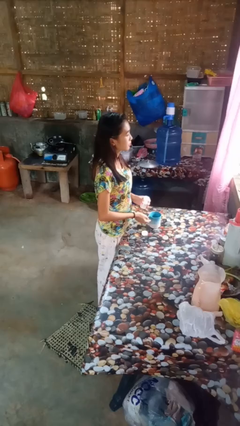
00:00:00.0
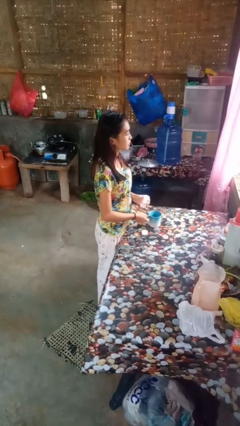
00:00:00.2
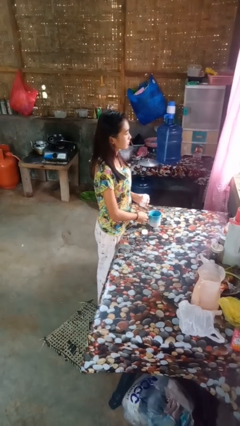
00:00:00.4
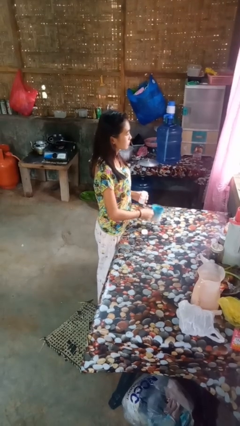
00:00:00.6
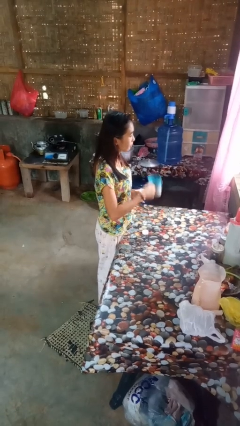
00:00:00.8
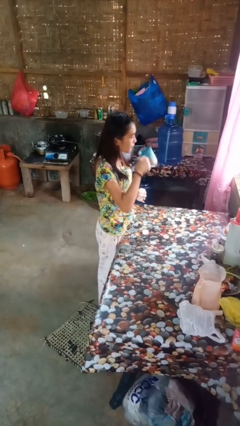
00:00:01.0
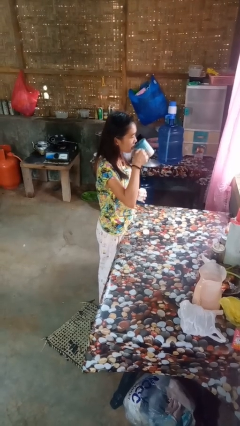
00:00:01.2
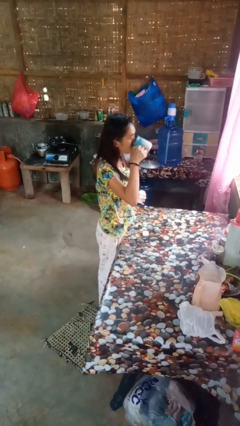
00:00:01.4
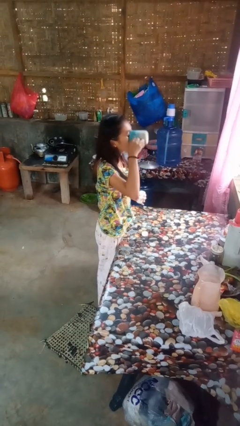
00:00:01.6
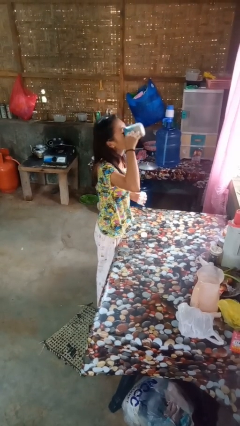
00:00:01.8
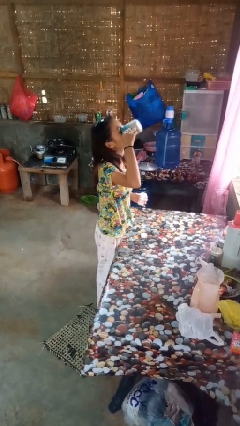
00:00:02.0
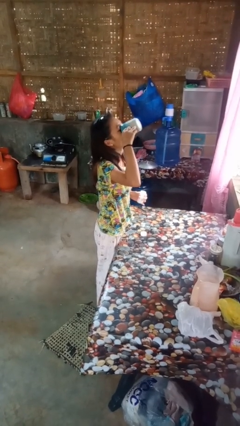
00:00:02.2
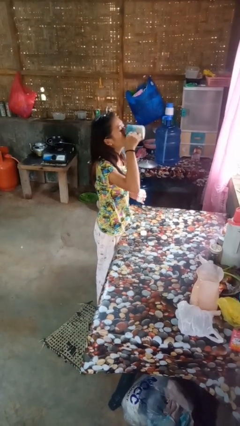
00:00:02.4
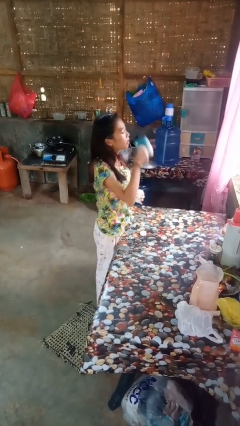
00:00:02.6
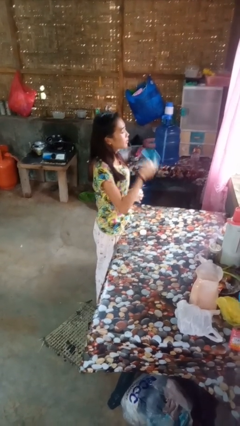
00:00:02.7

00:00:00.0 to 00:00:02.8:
person drinks from cup

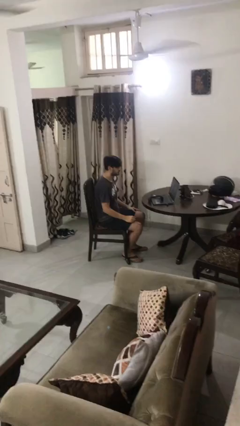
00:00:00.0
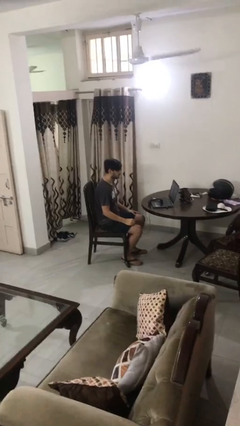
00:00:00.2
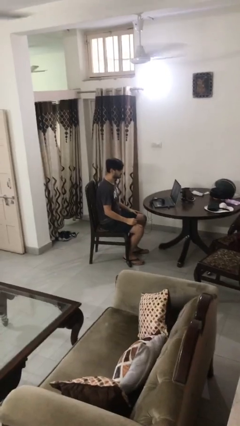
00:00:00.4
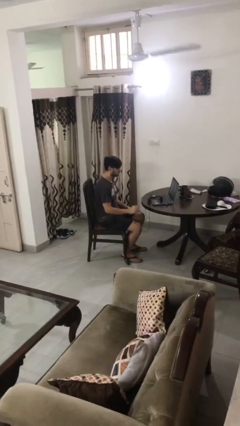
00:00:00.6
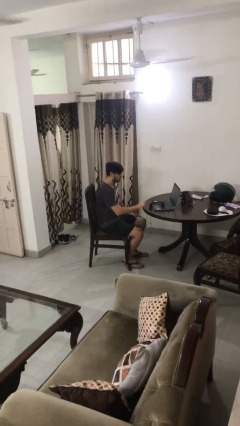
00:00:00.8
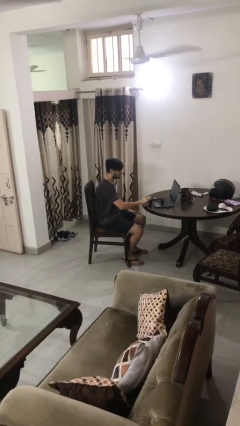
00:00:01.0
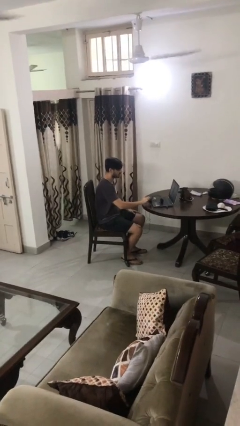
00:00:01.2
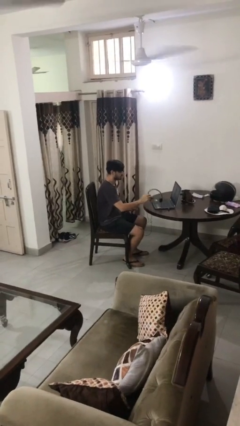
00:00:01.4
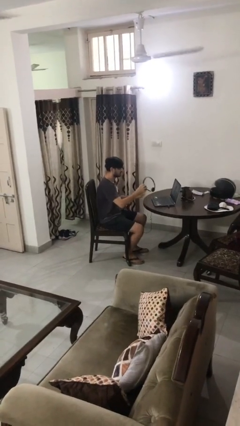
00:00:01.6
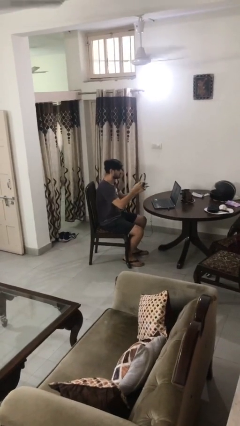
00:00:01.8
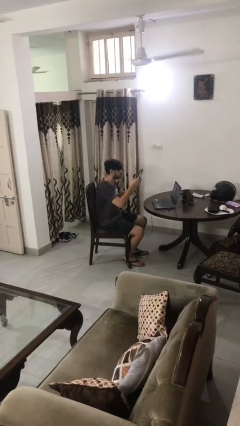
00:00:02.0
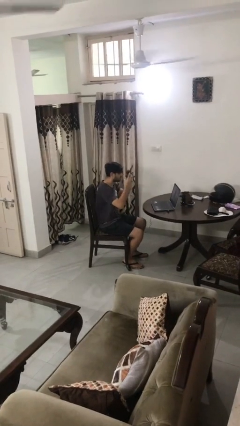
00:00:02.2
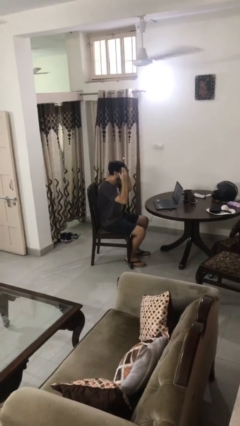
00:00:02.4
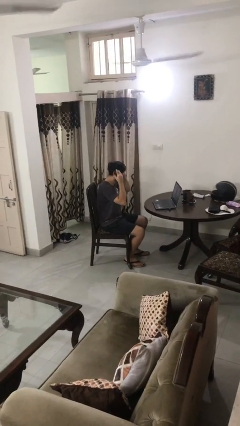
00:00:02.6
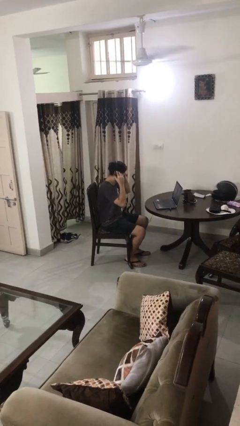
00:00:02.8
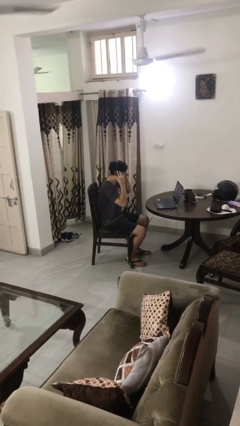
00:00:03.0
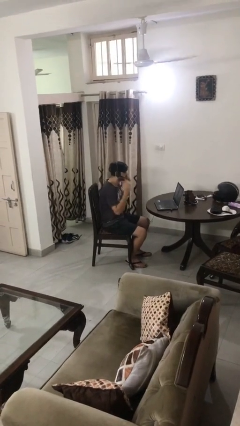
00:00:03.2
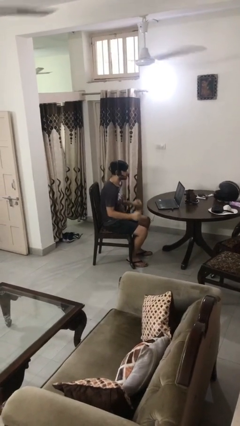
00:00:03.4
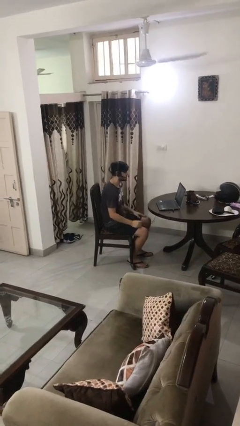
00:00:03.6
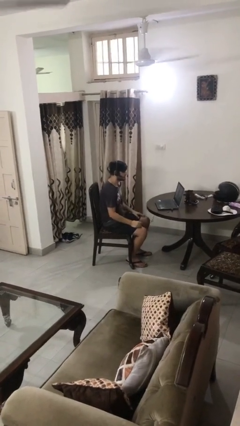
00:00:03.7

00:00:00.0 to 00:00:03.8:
person puts on headphones

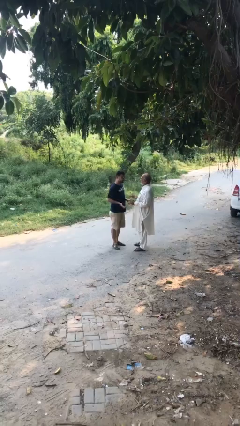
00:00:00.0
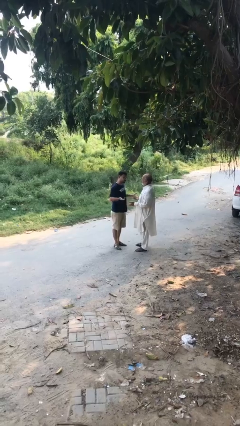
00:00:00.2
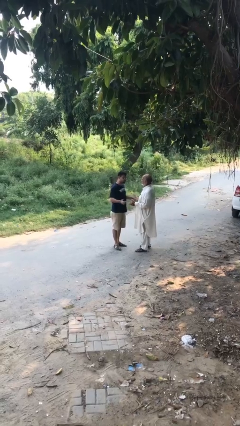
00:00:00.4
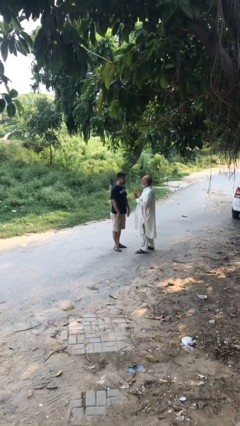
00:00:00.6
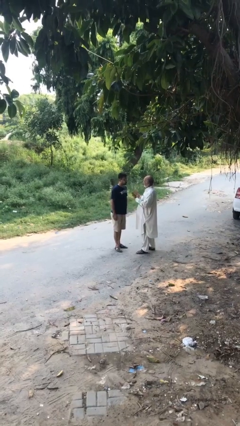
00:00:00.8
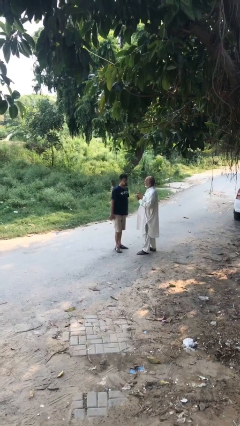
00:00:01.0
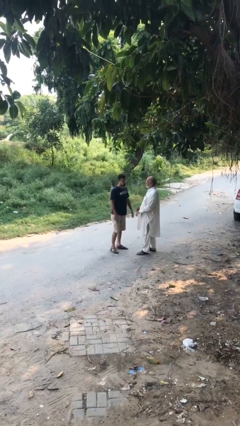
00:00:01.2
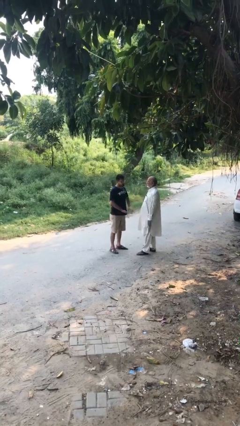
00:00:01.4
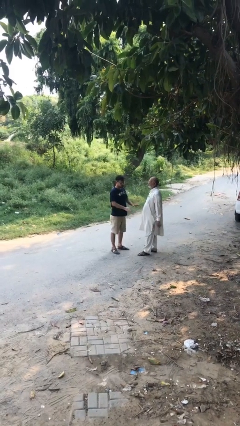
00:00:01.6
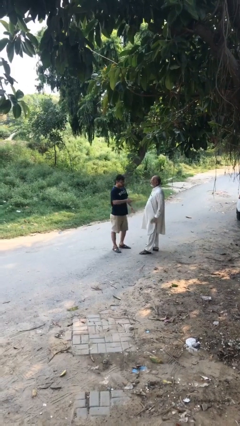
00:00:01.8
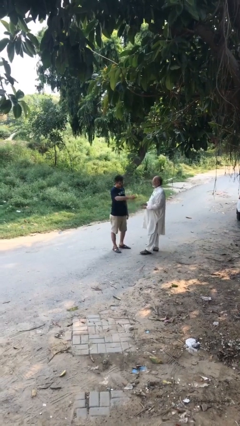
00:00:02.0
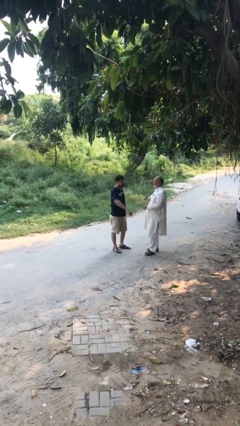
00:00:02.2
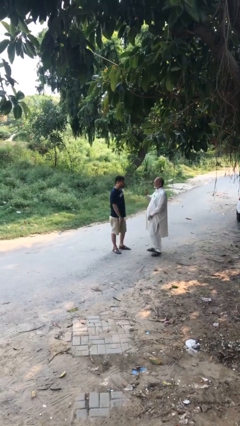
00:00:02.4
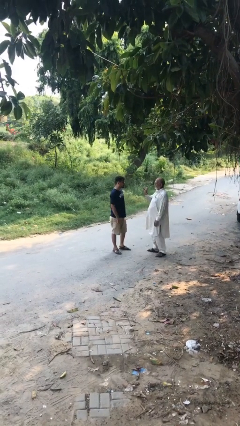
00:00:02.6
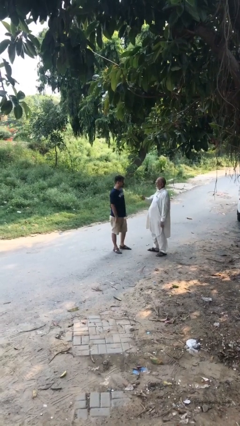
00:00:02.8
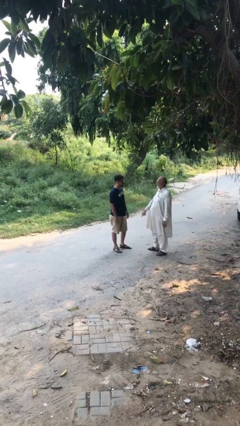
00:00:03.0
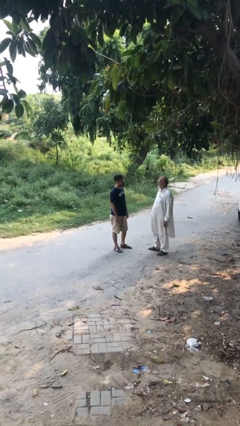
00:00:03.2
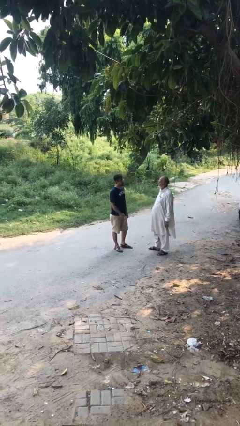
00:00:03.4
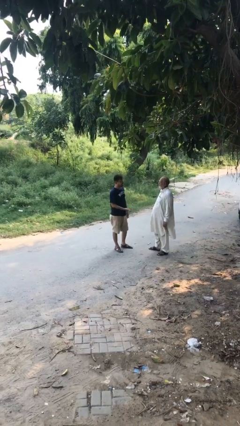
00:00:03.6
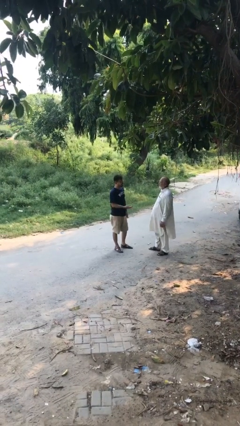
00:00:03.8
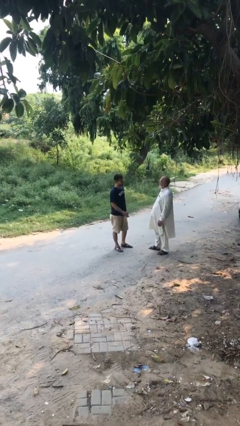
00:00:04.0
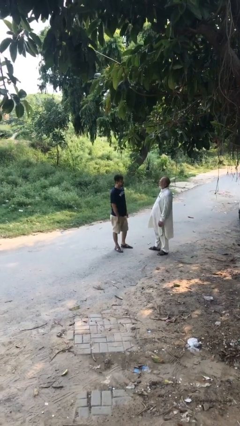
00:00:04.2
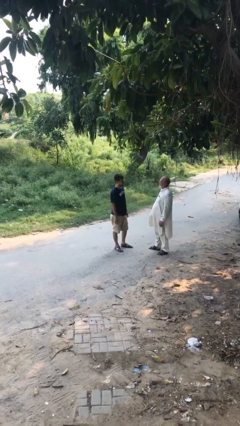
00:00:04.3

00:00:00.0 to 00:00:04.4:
person talks to person

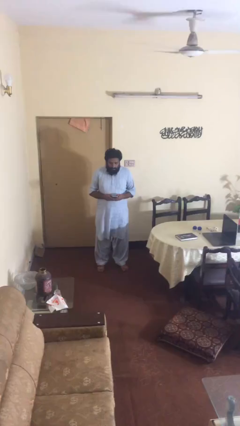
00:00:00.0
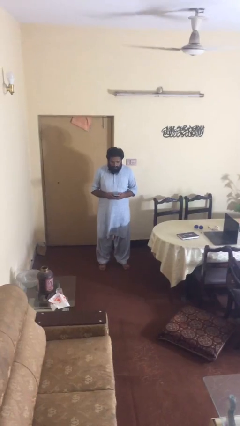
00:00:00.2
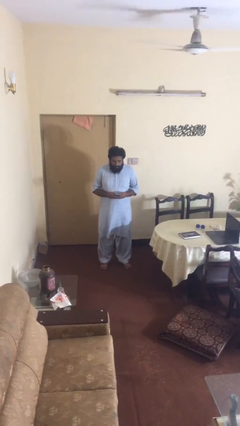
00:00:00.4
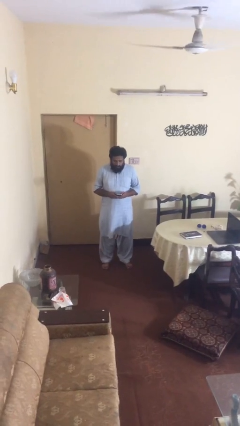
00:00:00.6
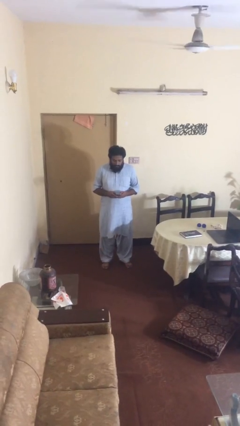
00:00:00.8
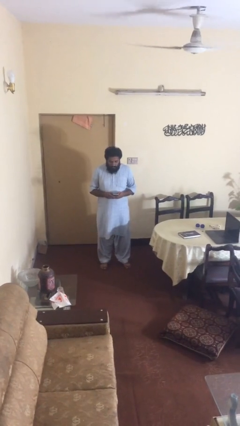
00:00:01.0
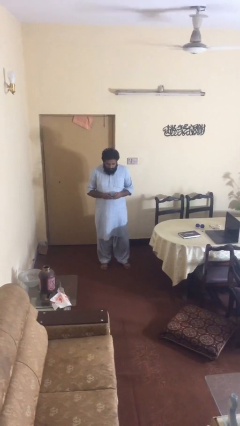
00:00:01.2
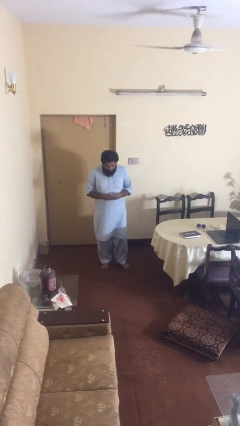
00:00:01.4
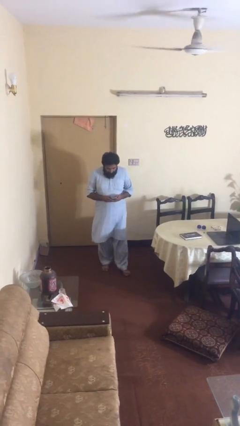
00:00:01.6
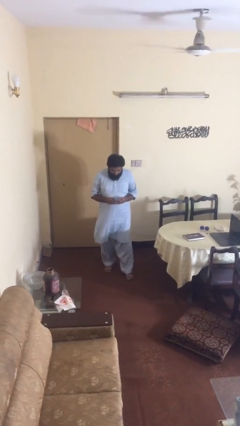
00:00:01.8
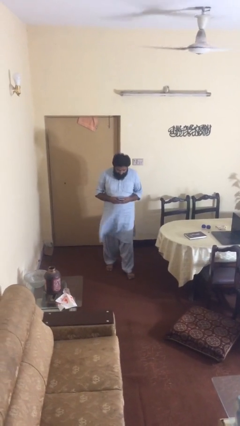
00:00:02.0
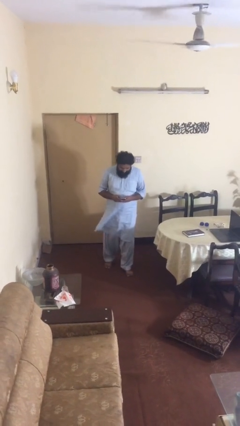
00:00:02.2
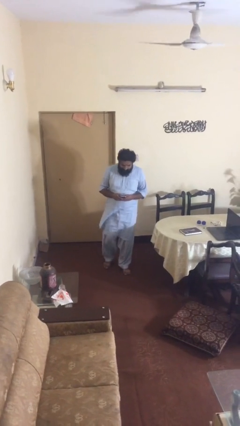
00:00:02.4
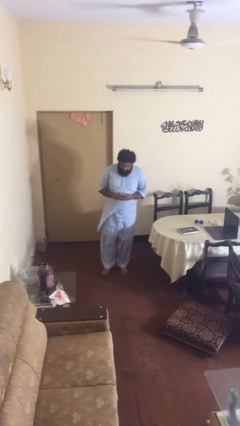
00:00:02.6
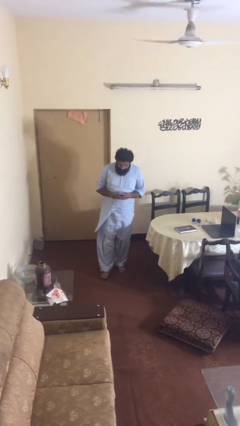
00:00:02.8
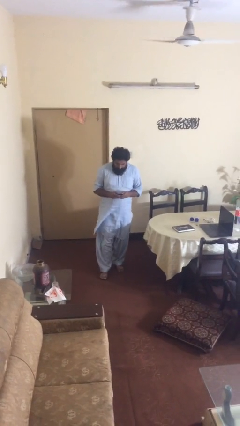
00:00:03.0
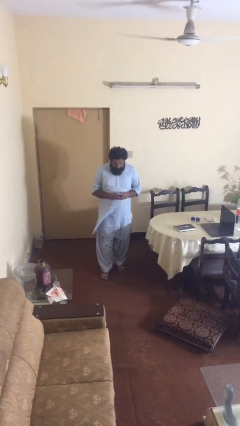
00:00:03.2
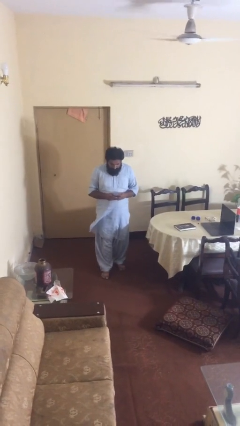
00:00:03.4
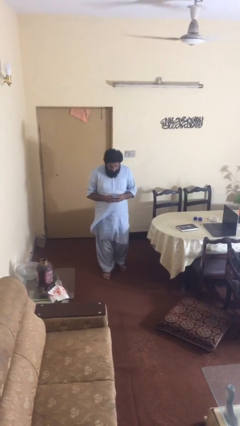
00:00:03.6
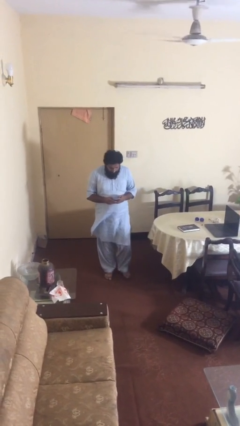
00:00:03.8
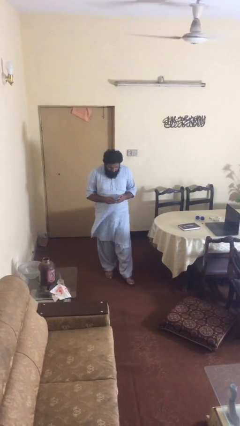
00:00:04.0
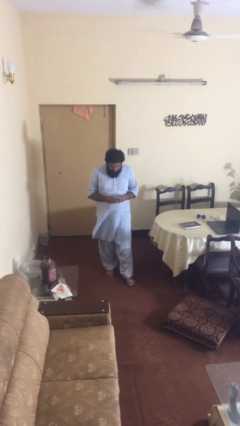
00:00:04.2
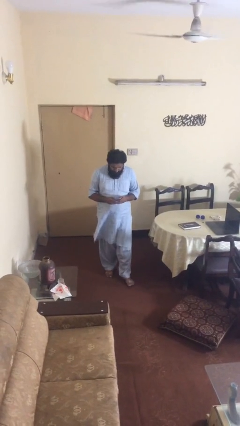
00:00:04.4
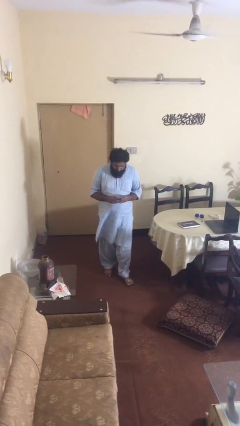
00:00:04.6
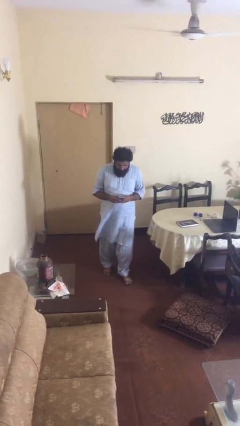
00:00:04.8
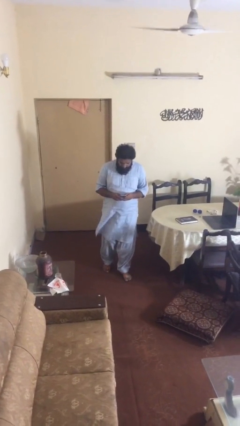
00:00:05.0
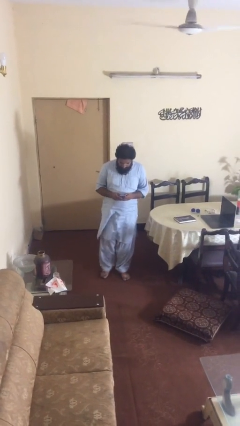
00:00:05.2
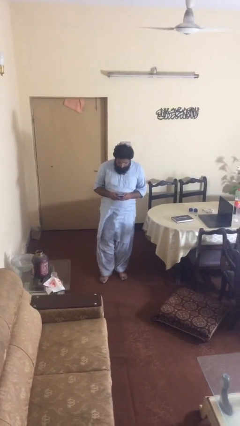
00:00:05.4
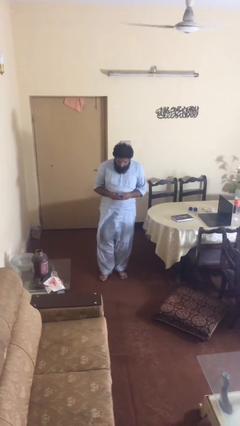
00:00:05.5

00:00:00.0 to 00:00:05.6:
person texts on phone

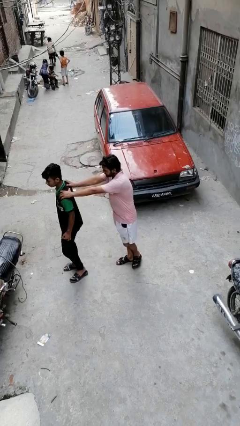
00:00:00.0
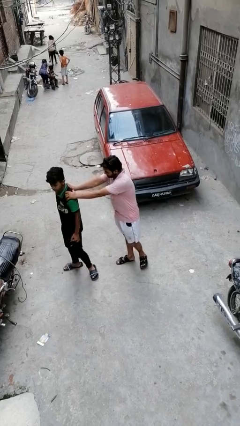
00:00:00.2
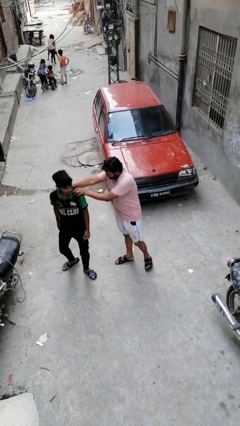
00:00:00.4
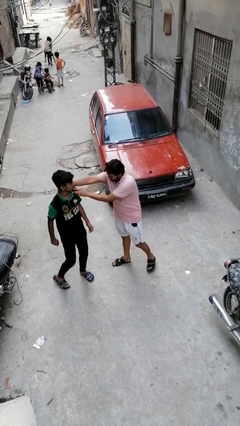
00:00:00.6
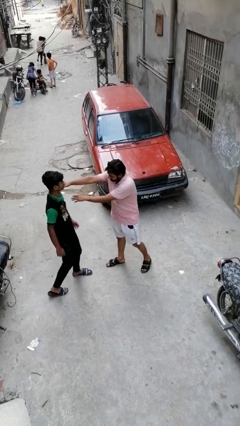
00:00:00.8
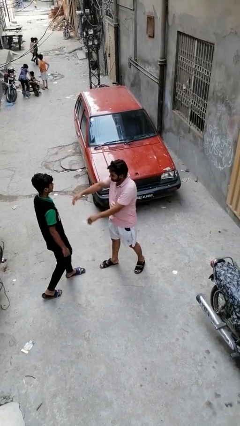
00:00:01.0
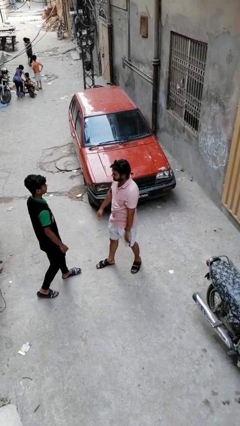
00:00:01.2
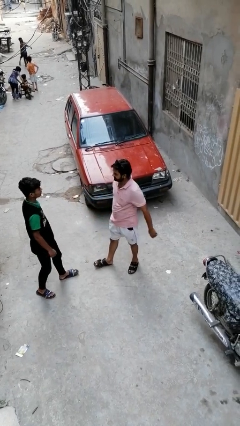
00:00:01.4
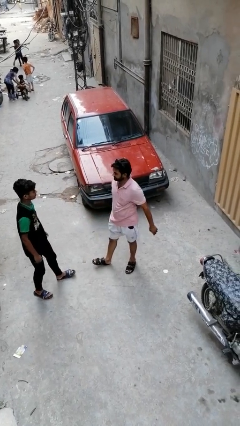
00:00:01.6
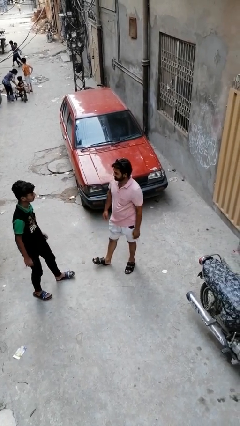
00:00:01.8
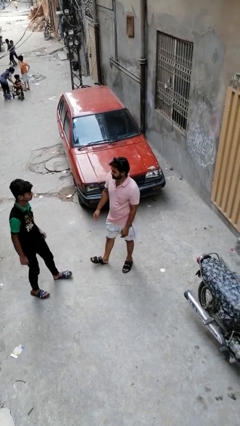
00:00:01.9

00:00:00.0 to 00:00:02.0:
person spins person around
